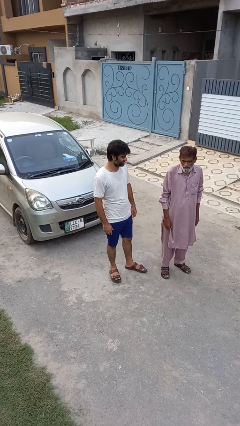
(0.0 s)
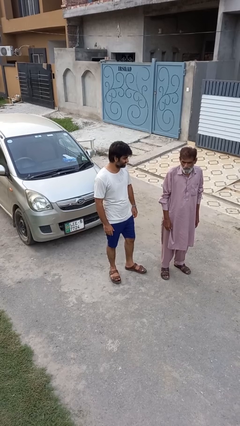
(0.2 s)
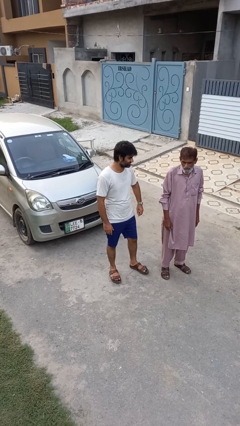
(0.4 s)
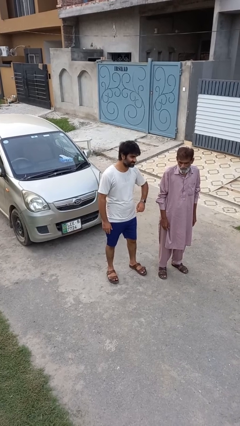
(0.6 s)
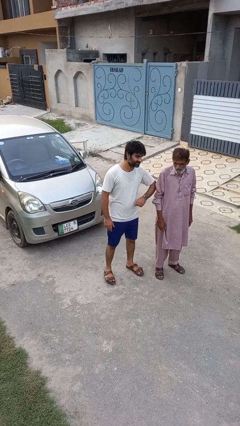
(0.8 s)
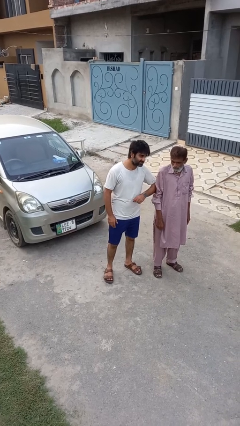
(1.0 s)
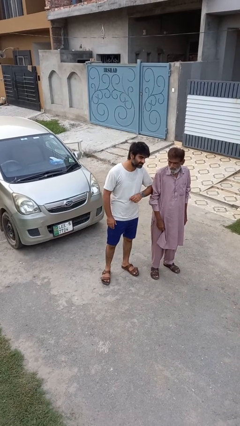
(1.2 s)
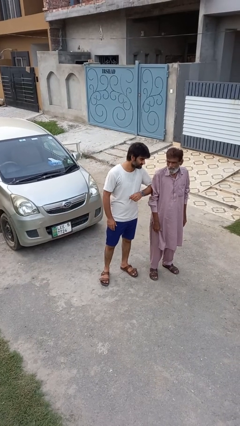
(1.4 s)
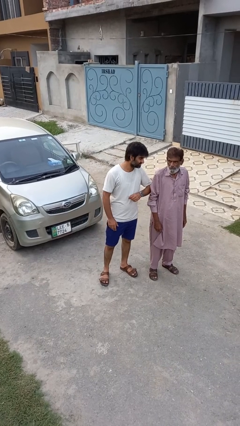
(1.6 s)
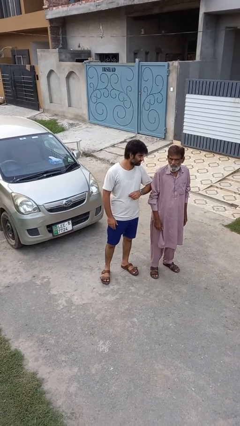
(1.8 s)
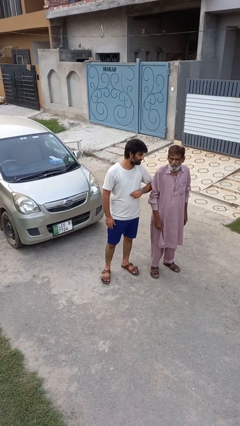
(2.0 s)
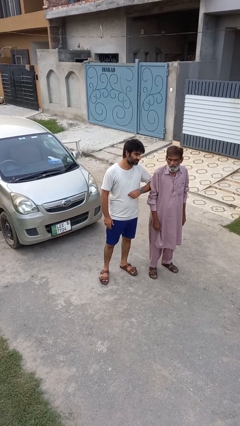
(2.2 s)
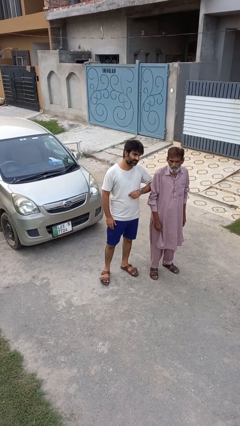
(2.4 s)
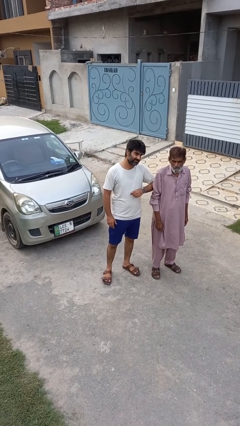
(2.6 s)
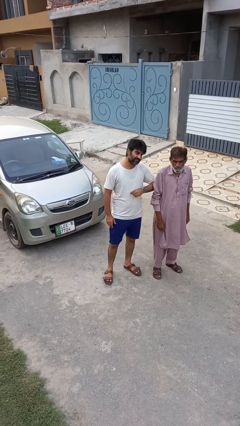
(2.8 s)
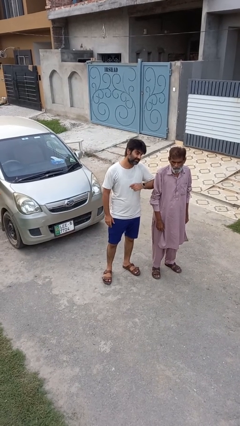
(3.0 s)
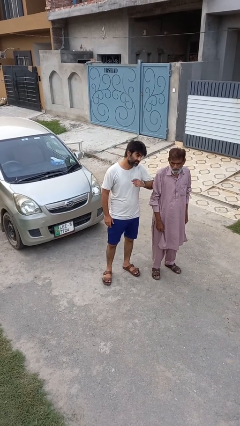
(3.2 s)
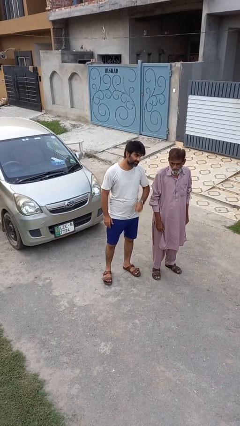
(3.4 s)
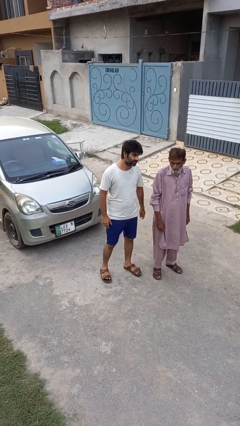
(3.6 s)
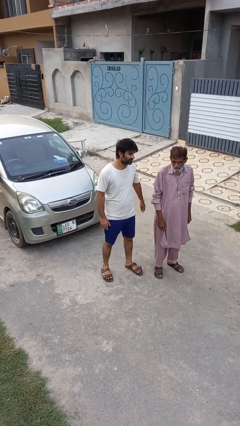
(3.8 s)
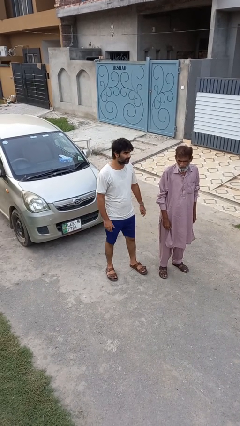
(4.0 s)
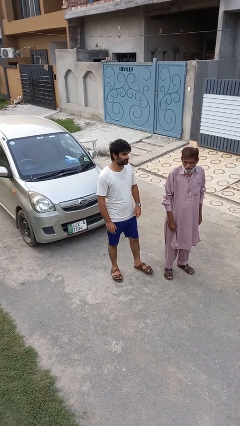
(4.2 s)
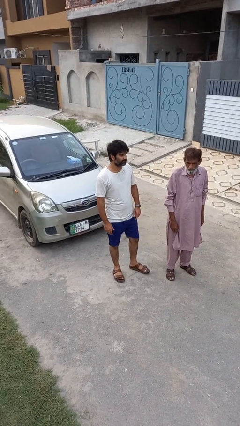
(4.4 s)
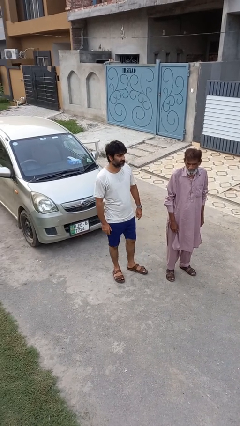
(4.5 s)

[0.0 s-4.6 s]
person nudges person with elbow

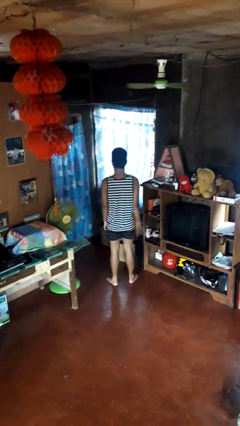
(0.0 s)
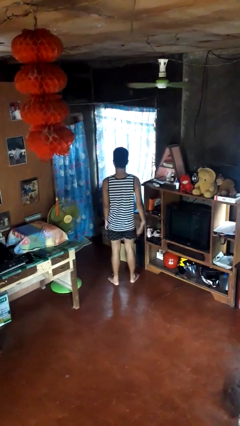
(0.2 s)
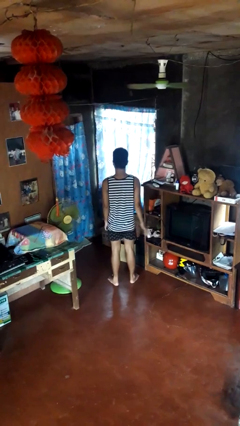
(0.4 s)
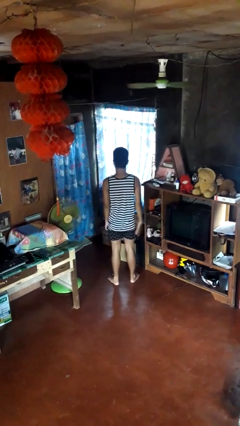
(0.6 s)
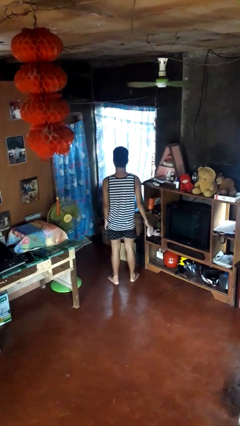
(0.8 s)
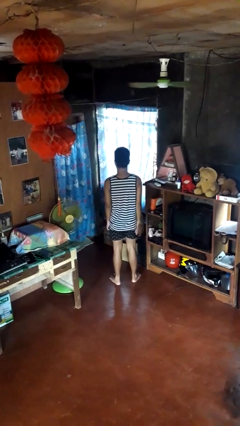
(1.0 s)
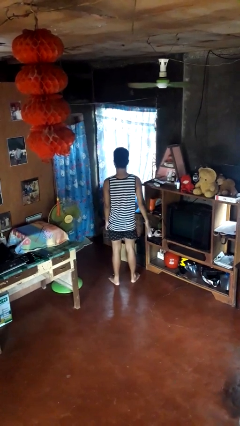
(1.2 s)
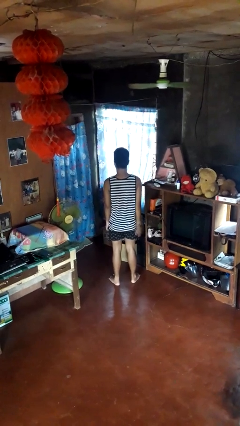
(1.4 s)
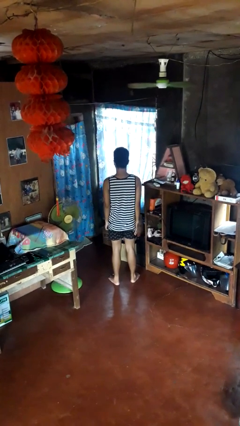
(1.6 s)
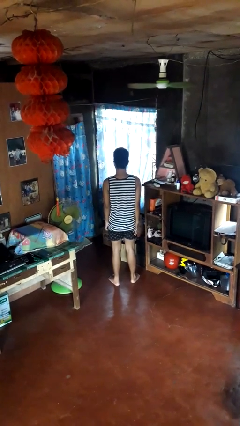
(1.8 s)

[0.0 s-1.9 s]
person slaps hands on thighs

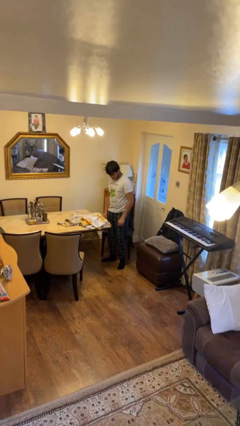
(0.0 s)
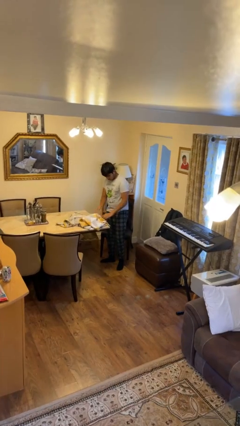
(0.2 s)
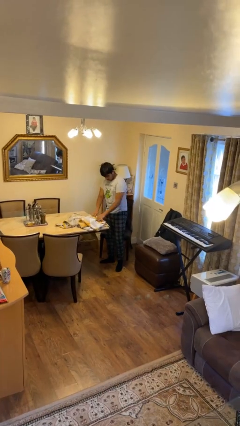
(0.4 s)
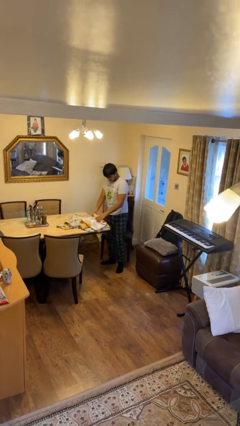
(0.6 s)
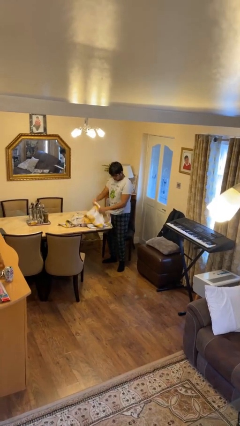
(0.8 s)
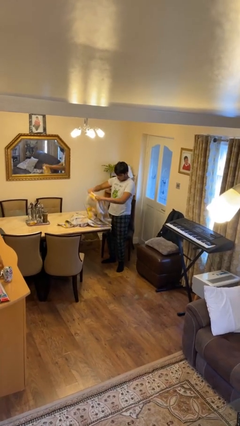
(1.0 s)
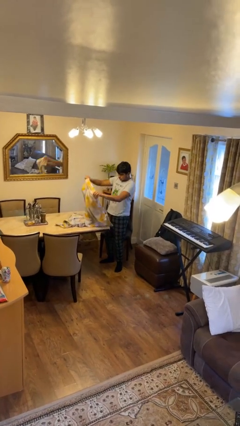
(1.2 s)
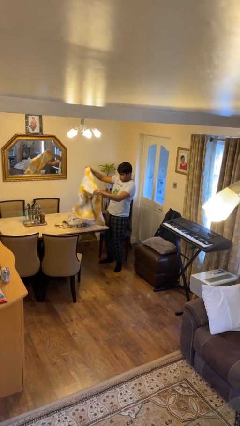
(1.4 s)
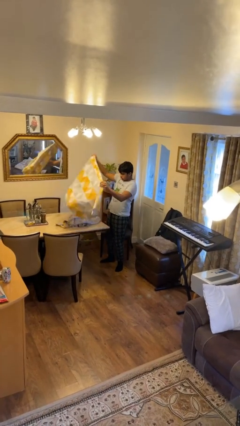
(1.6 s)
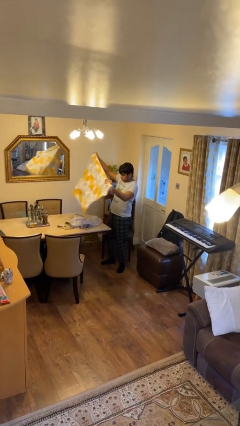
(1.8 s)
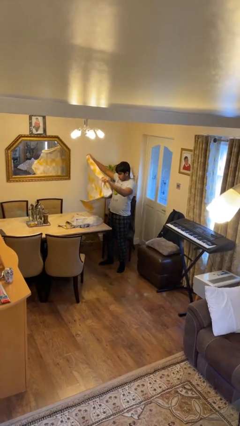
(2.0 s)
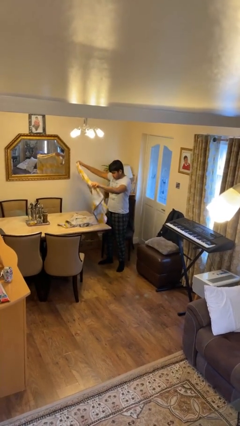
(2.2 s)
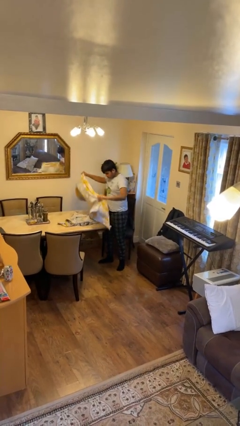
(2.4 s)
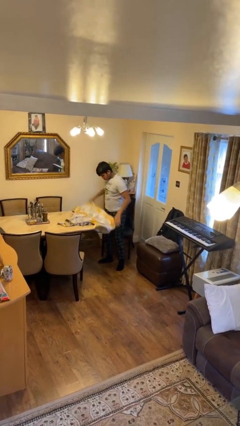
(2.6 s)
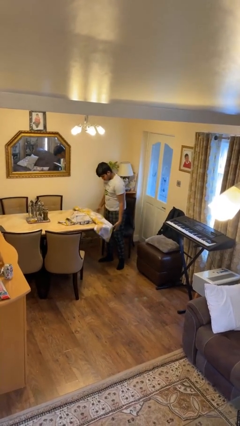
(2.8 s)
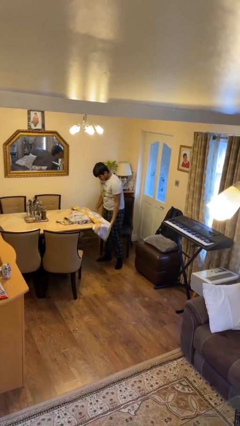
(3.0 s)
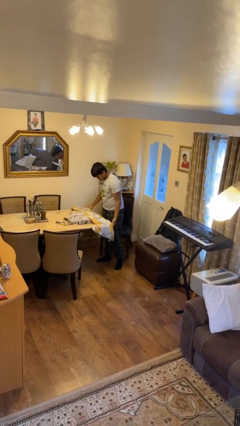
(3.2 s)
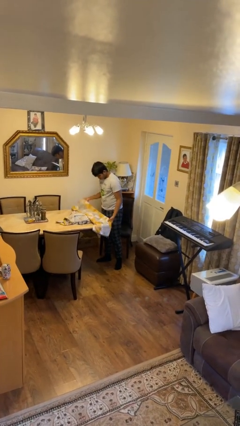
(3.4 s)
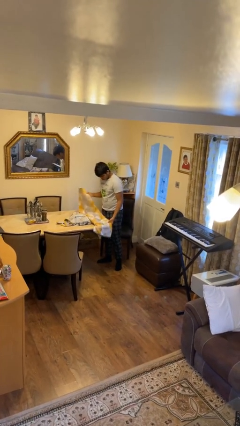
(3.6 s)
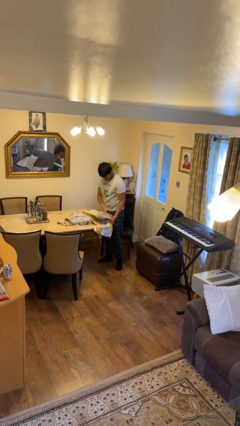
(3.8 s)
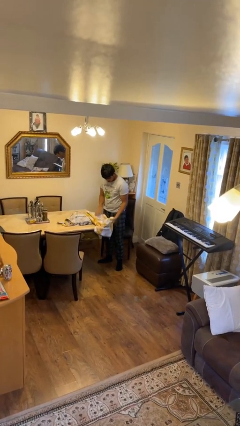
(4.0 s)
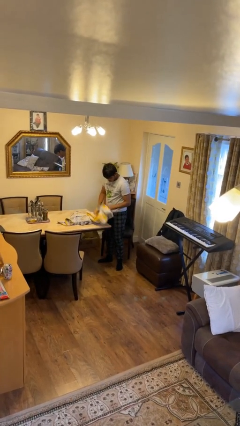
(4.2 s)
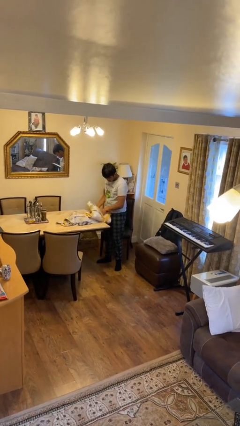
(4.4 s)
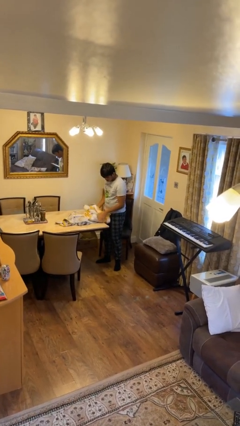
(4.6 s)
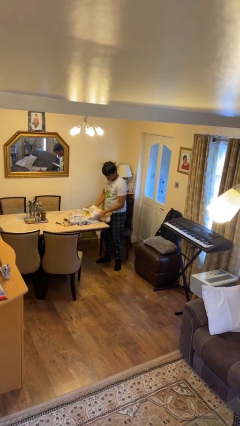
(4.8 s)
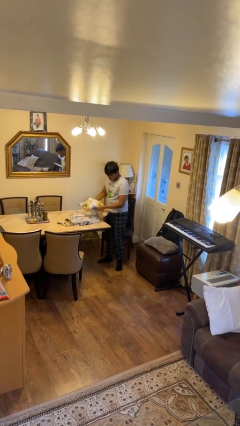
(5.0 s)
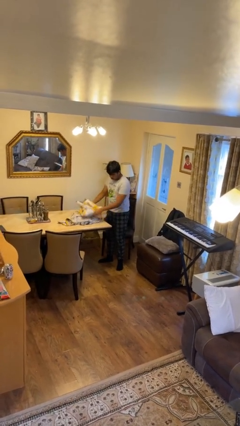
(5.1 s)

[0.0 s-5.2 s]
person folds towel

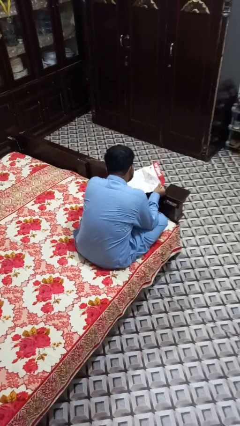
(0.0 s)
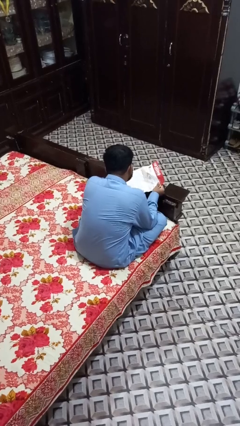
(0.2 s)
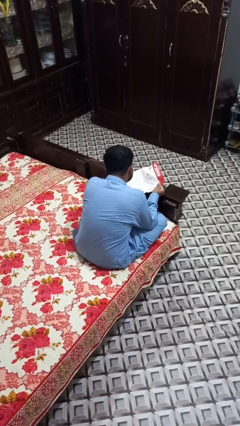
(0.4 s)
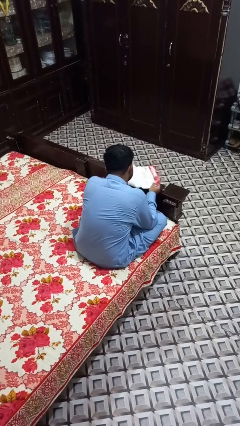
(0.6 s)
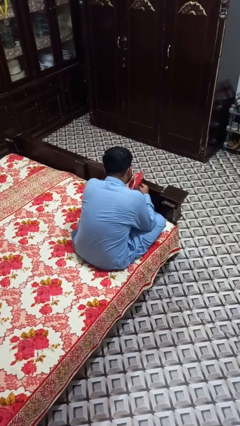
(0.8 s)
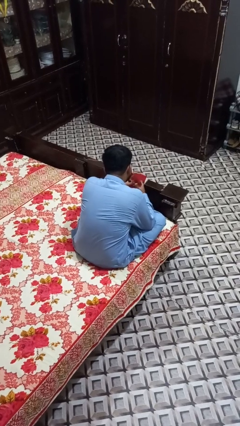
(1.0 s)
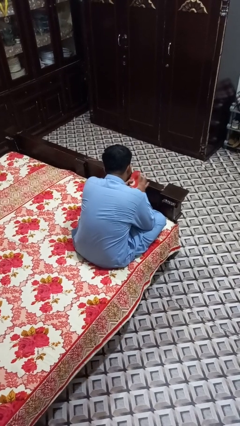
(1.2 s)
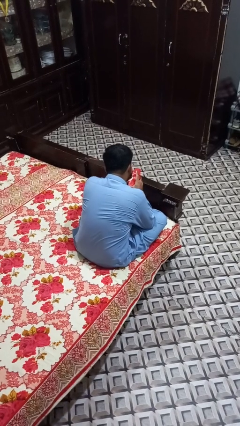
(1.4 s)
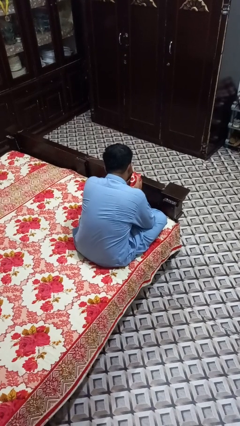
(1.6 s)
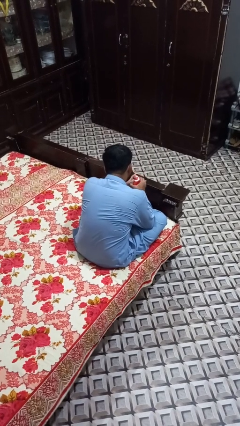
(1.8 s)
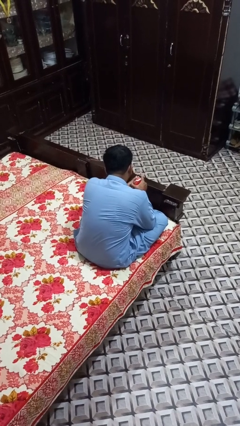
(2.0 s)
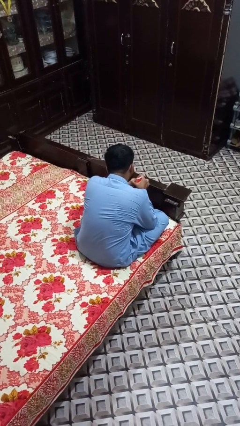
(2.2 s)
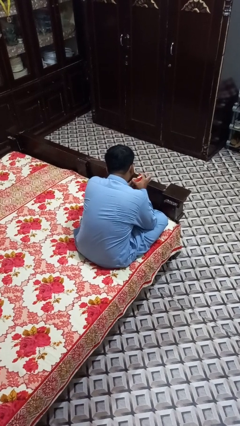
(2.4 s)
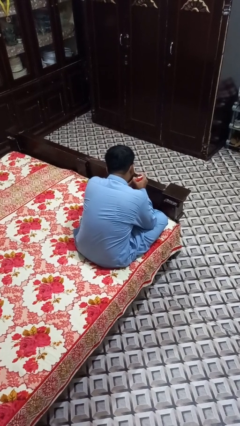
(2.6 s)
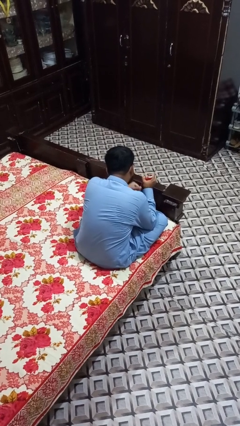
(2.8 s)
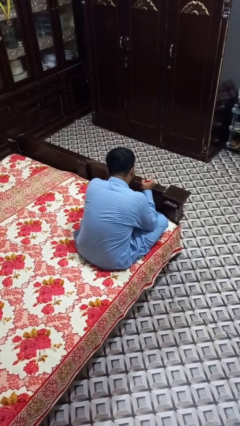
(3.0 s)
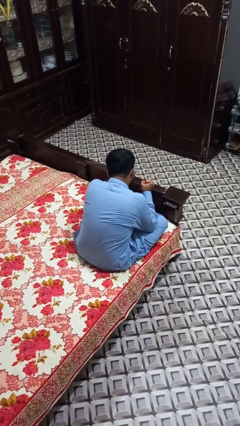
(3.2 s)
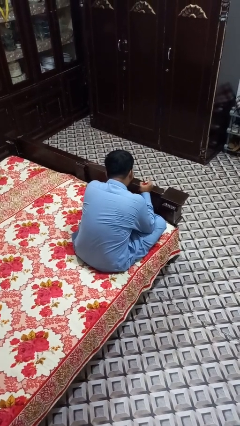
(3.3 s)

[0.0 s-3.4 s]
person crumples paper

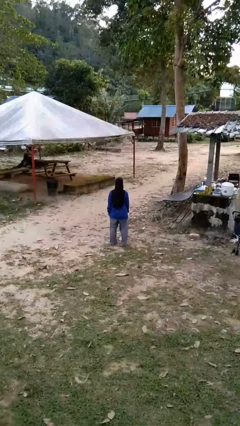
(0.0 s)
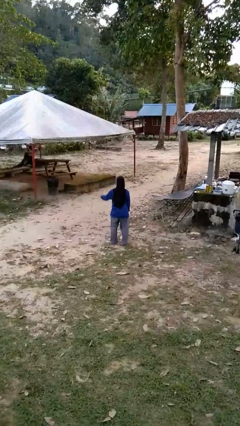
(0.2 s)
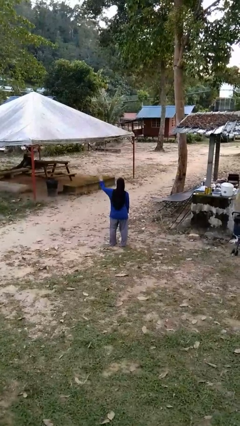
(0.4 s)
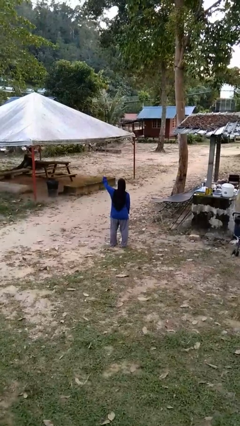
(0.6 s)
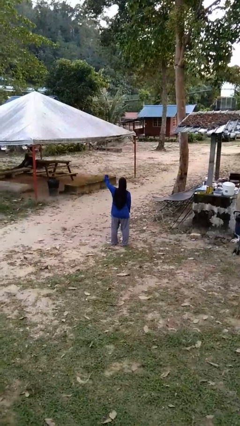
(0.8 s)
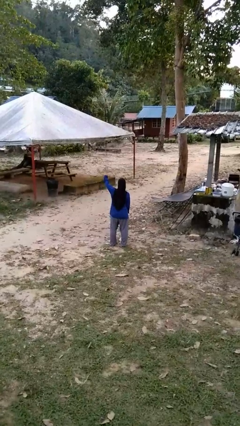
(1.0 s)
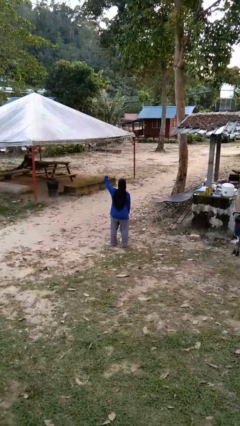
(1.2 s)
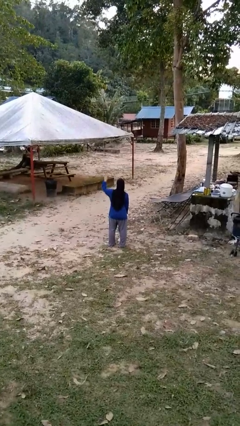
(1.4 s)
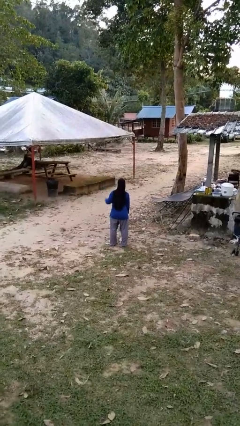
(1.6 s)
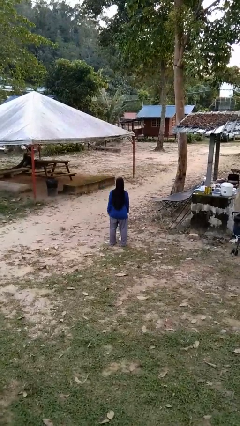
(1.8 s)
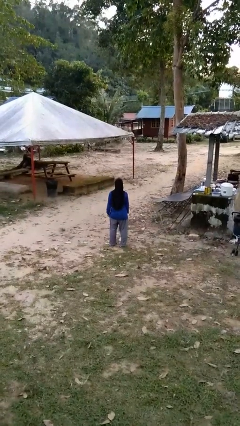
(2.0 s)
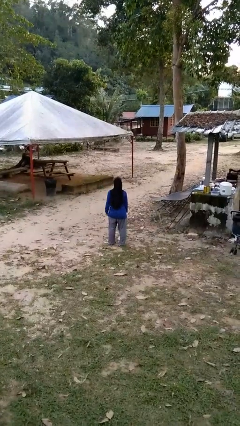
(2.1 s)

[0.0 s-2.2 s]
person gestures number four

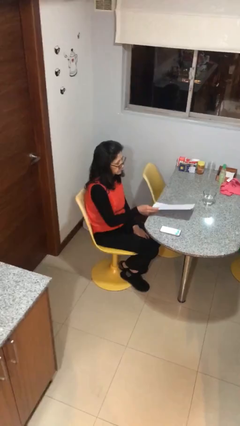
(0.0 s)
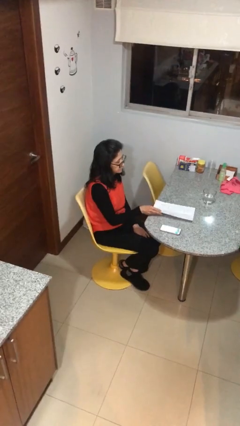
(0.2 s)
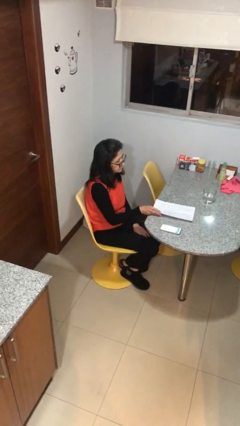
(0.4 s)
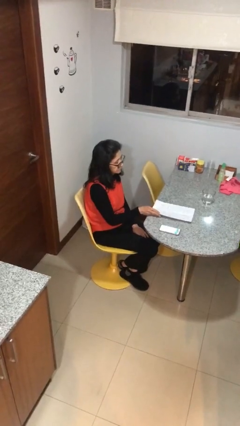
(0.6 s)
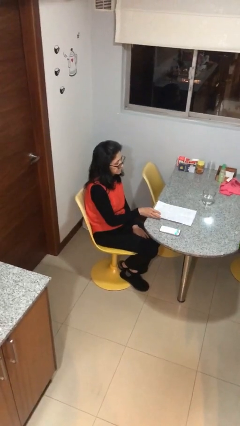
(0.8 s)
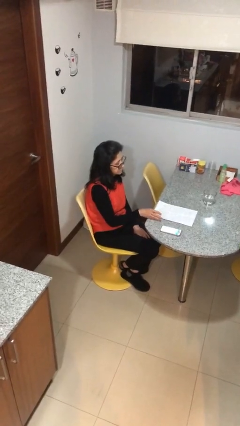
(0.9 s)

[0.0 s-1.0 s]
person puts down object on table
